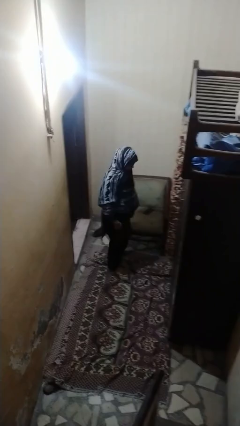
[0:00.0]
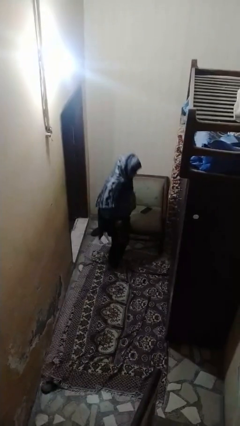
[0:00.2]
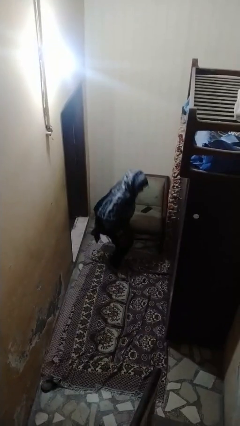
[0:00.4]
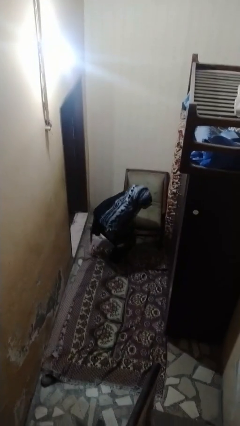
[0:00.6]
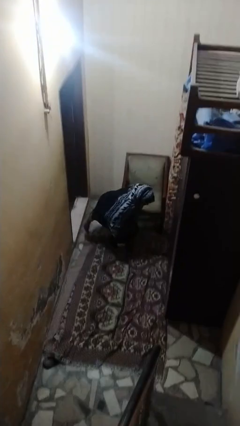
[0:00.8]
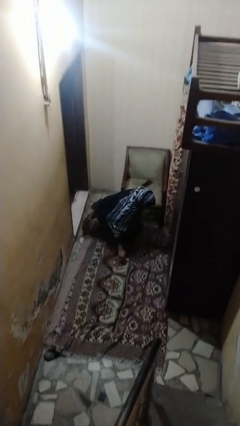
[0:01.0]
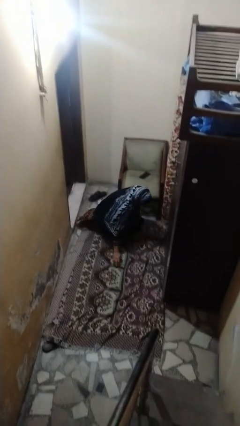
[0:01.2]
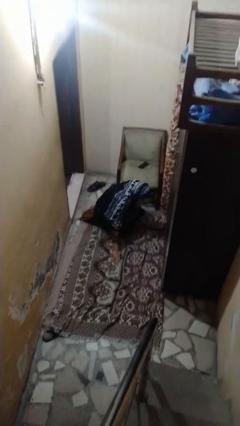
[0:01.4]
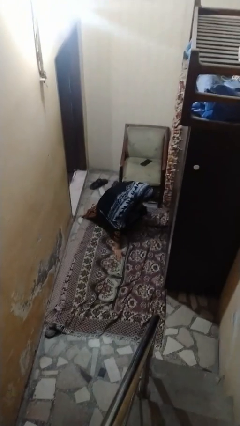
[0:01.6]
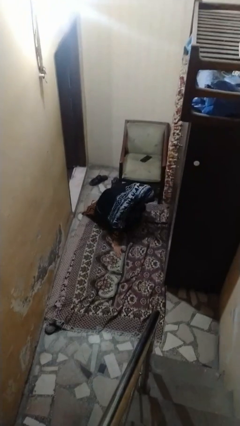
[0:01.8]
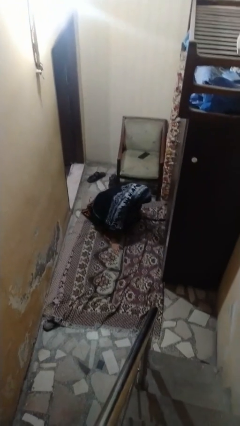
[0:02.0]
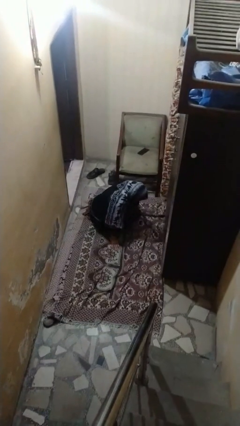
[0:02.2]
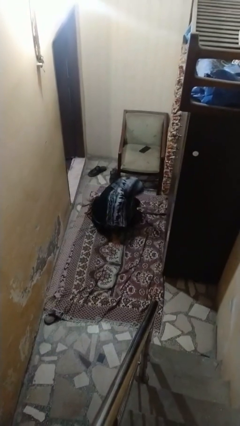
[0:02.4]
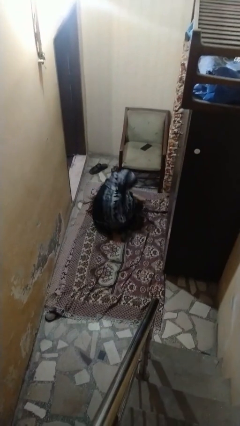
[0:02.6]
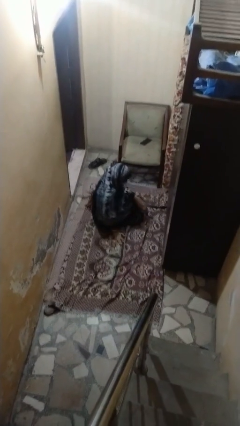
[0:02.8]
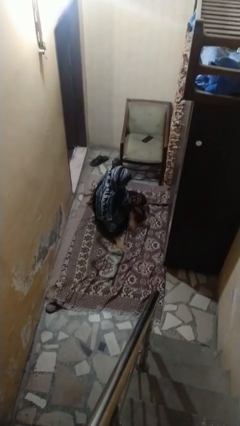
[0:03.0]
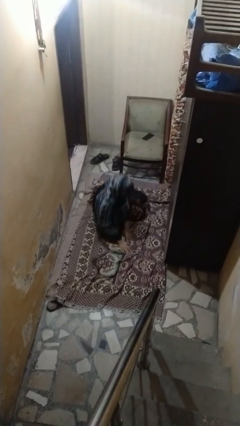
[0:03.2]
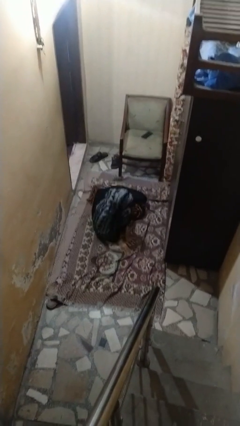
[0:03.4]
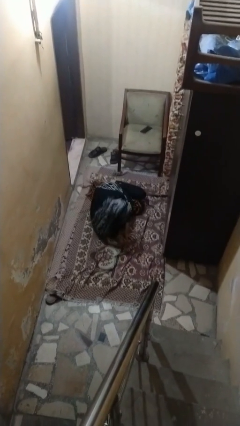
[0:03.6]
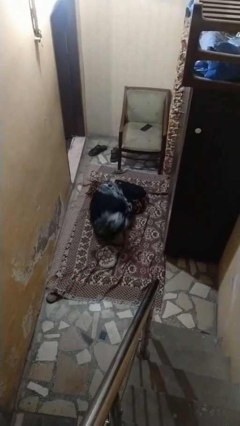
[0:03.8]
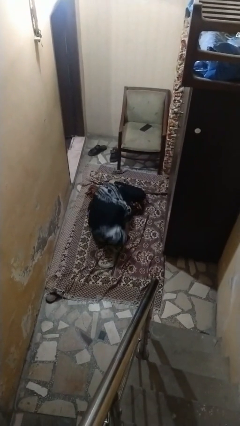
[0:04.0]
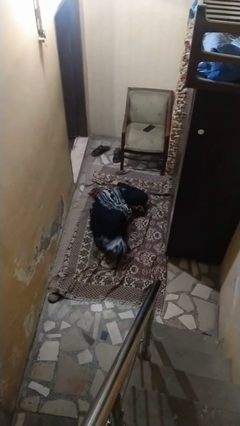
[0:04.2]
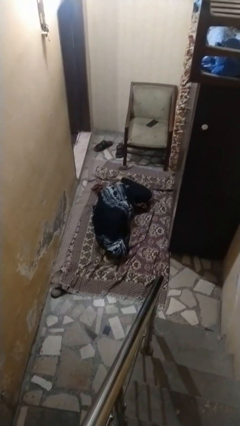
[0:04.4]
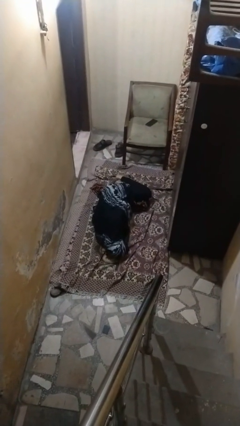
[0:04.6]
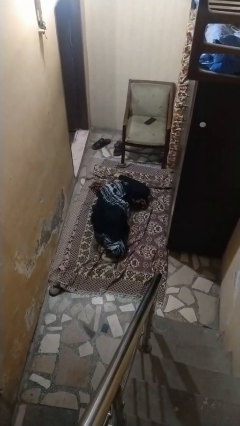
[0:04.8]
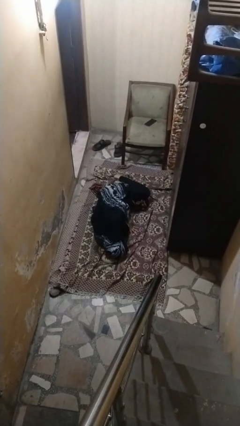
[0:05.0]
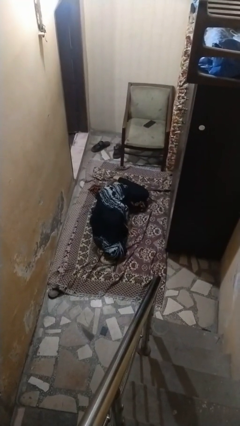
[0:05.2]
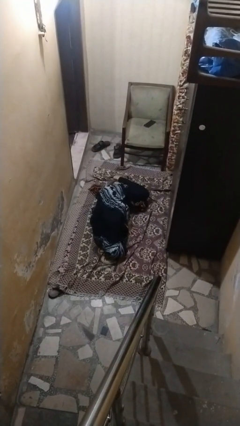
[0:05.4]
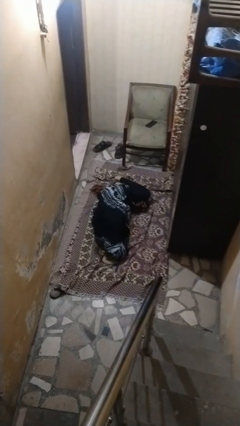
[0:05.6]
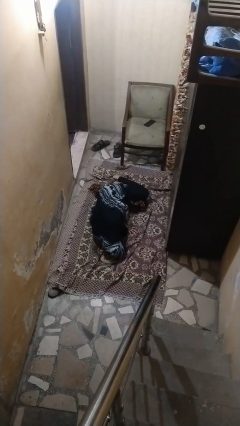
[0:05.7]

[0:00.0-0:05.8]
person falls while standing

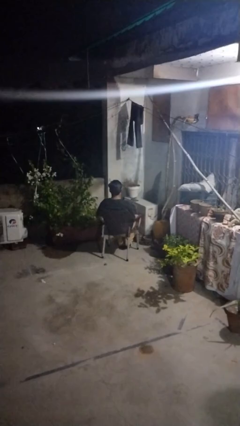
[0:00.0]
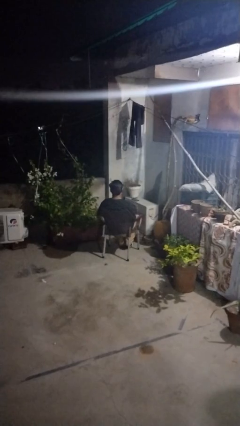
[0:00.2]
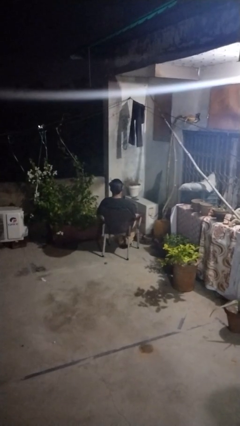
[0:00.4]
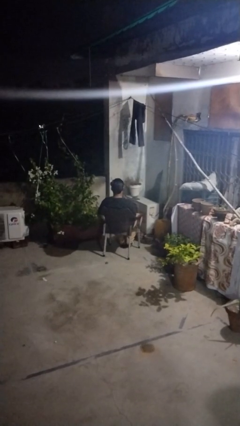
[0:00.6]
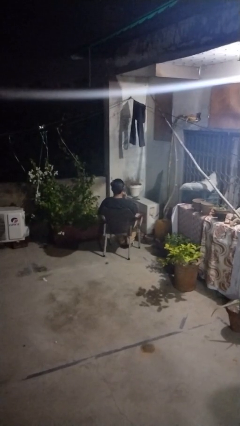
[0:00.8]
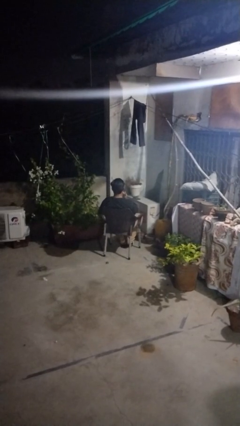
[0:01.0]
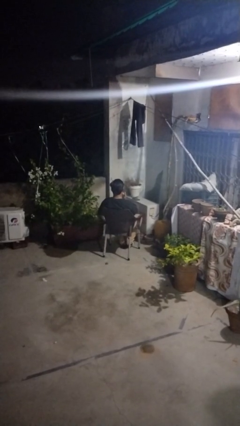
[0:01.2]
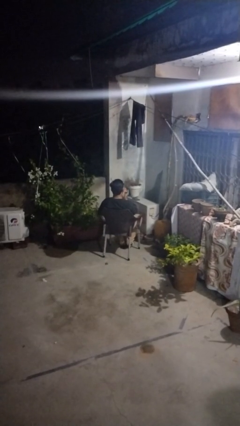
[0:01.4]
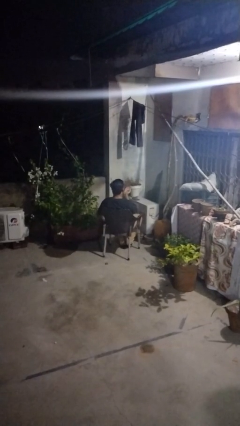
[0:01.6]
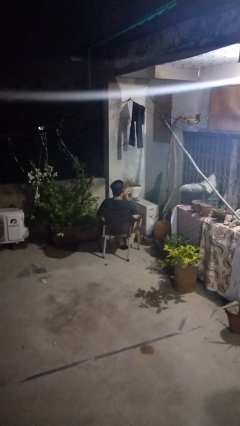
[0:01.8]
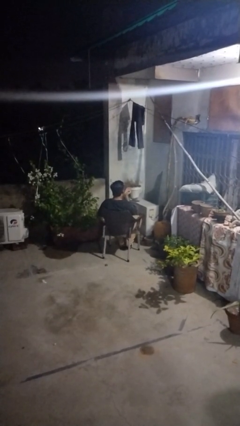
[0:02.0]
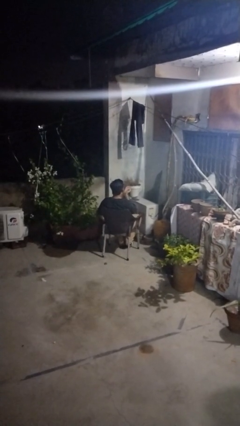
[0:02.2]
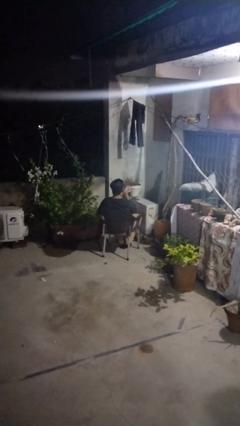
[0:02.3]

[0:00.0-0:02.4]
person gestures blow kiss

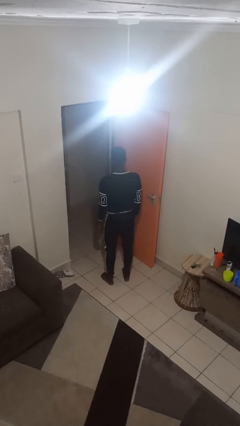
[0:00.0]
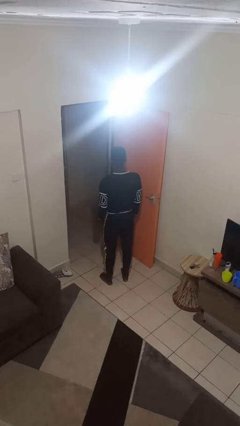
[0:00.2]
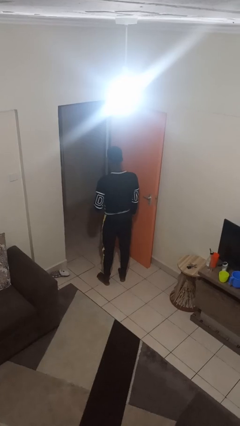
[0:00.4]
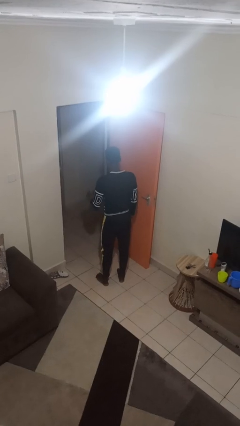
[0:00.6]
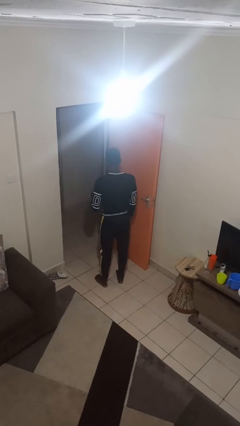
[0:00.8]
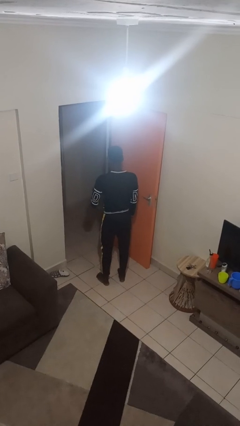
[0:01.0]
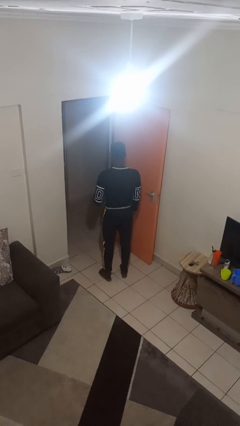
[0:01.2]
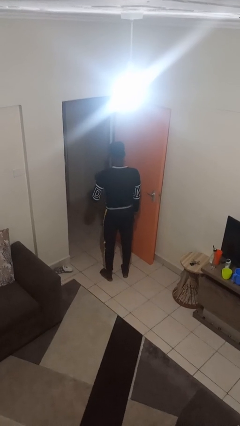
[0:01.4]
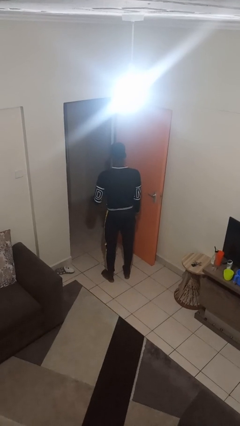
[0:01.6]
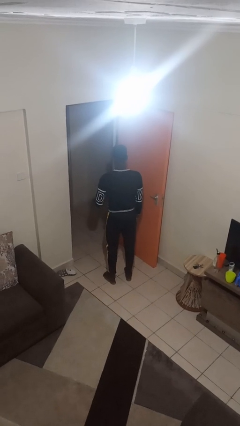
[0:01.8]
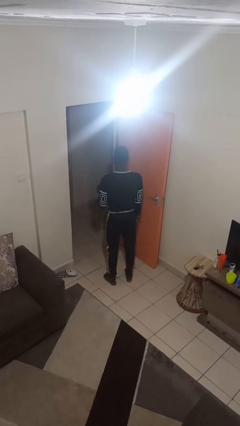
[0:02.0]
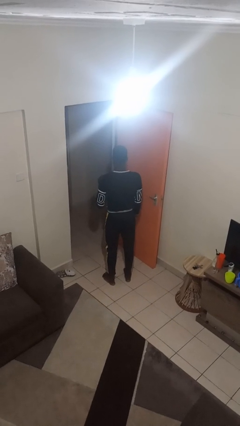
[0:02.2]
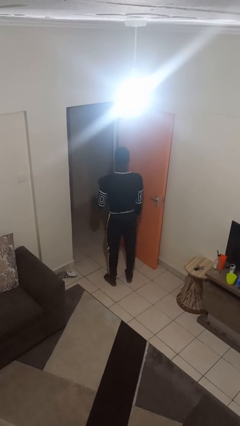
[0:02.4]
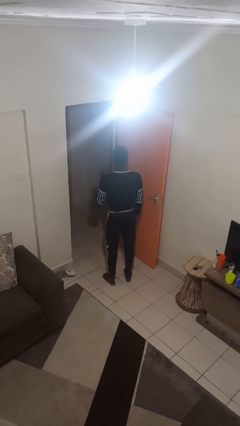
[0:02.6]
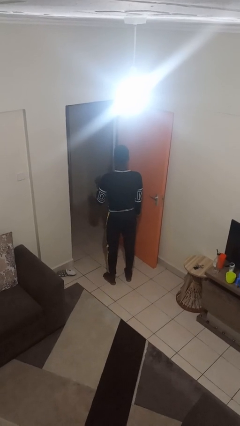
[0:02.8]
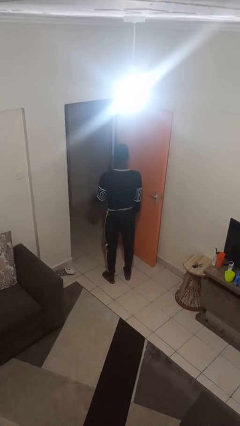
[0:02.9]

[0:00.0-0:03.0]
person snaps fingers

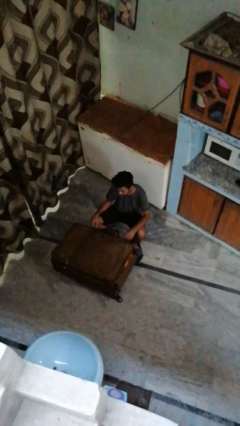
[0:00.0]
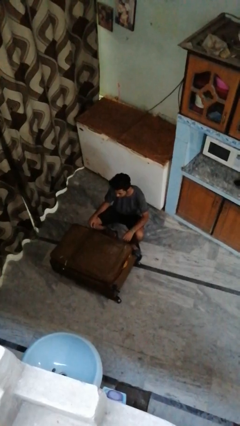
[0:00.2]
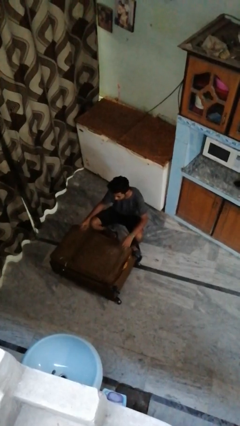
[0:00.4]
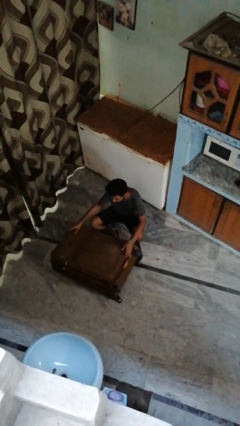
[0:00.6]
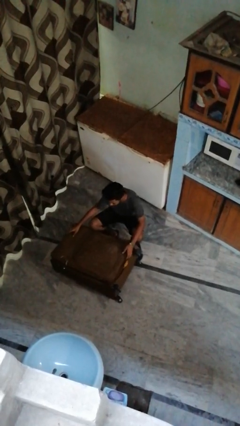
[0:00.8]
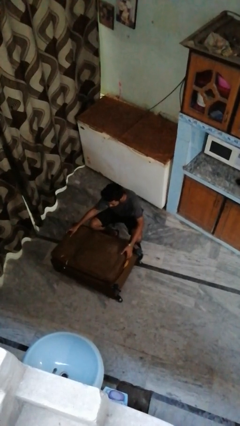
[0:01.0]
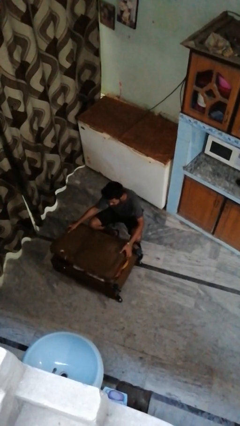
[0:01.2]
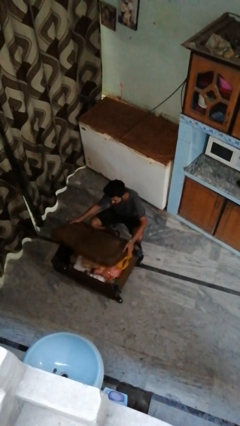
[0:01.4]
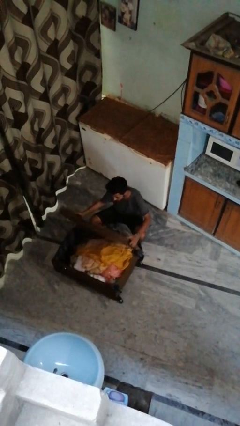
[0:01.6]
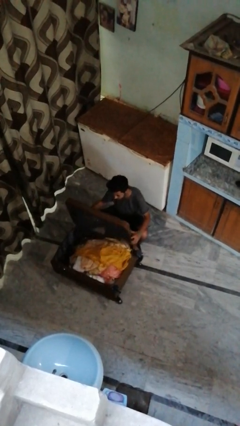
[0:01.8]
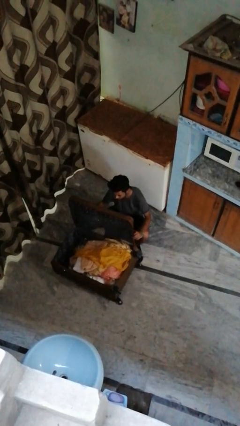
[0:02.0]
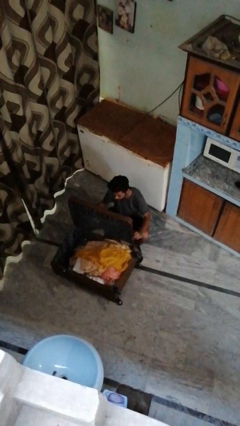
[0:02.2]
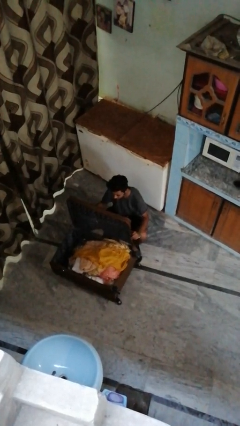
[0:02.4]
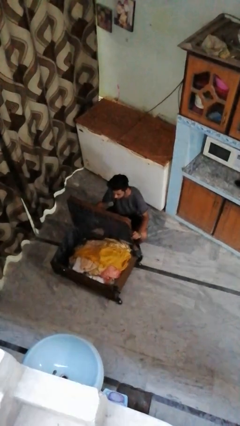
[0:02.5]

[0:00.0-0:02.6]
person opens suitcase

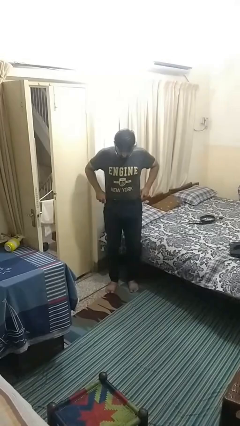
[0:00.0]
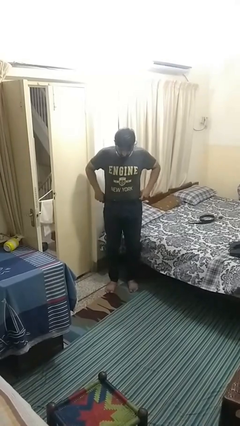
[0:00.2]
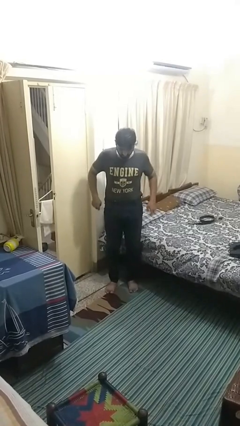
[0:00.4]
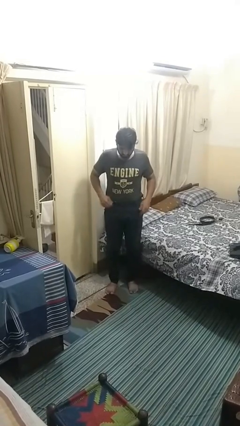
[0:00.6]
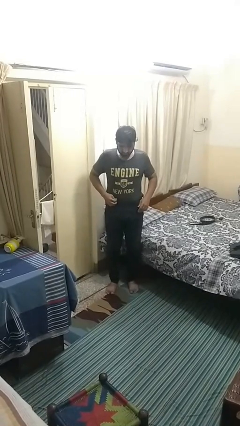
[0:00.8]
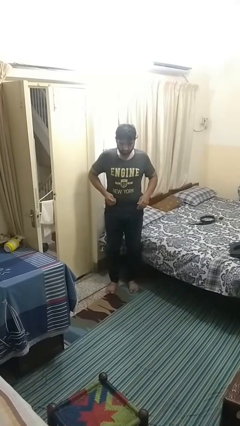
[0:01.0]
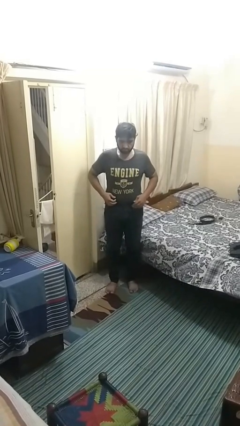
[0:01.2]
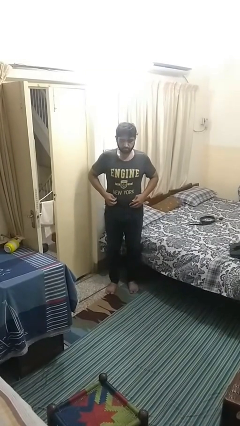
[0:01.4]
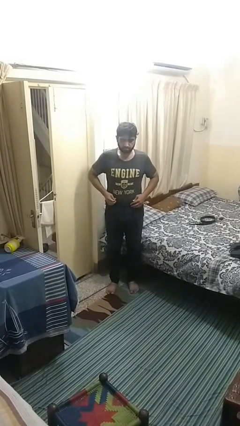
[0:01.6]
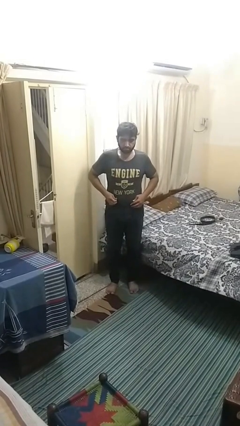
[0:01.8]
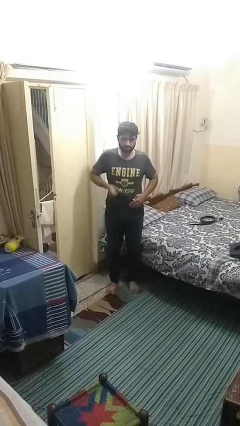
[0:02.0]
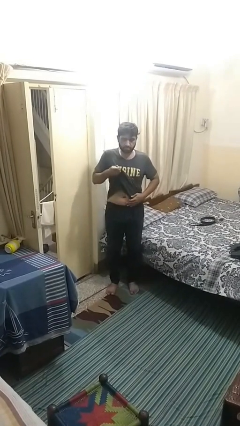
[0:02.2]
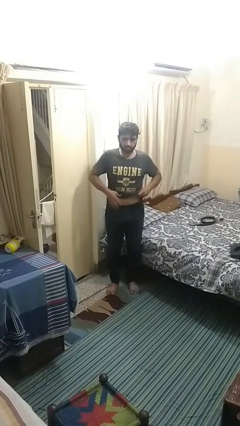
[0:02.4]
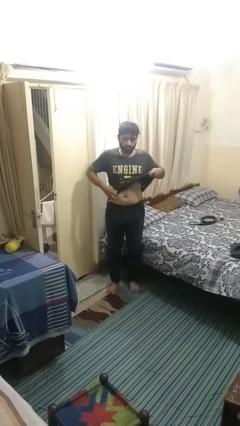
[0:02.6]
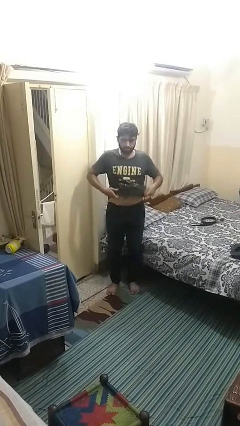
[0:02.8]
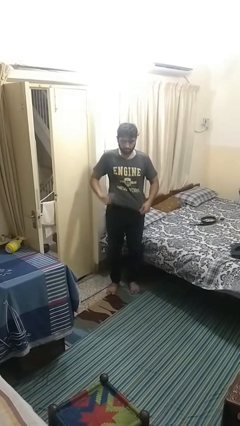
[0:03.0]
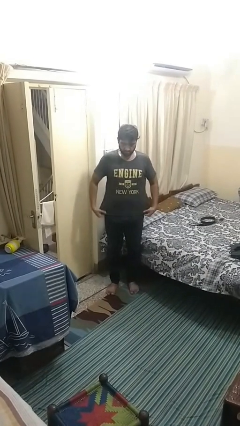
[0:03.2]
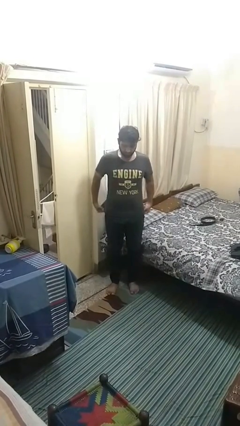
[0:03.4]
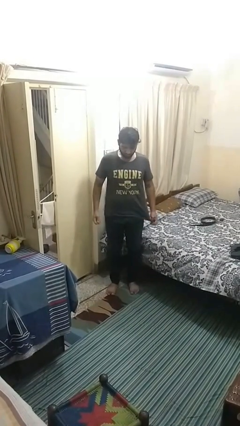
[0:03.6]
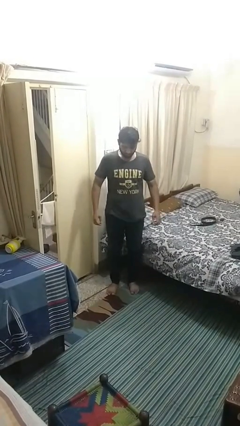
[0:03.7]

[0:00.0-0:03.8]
person untucks shirt
